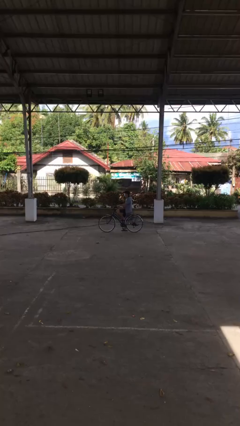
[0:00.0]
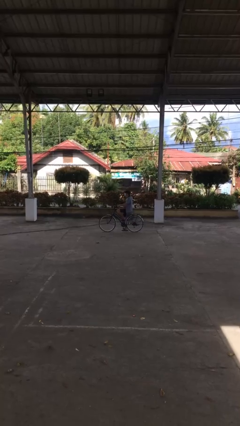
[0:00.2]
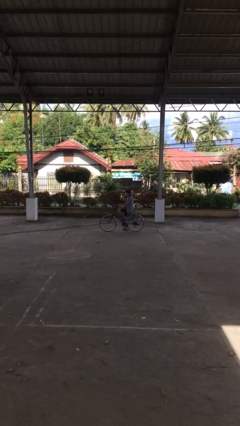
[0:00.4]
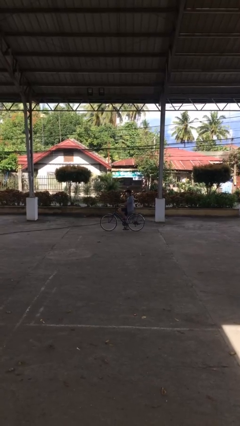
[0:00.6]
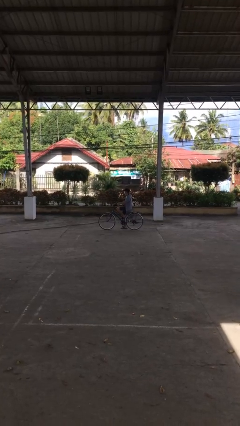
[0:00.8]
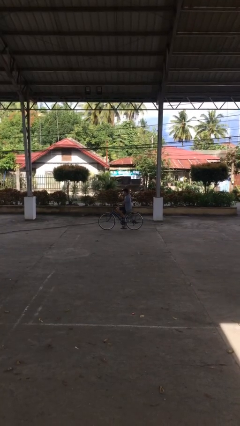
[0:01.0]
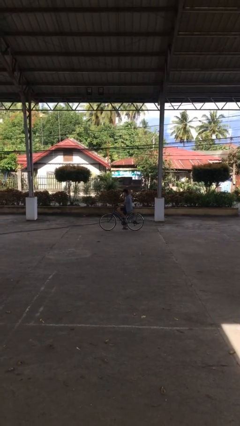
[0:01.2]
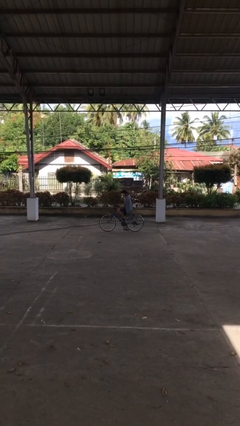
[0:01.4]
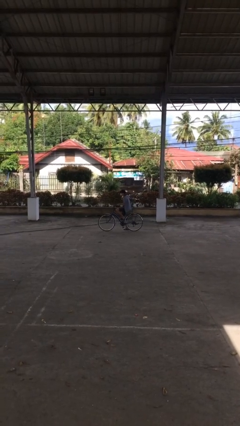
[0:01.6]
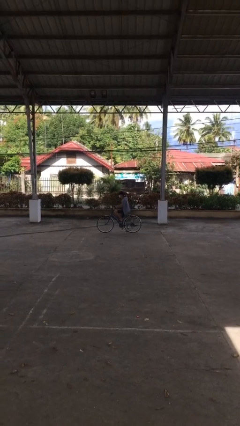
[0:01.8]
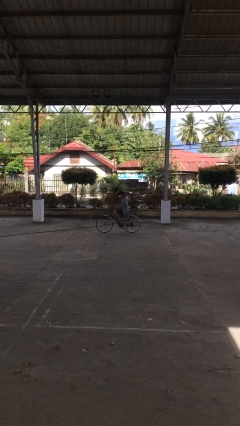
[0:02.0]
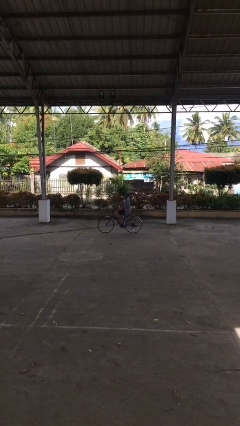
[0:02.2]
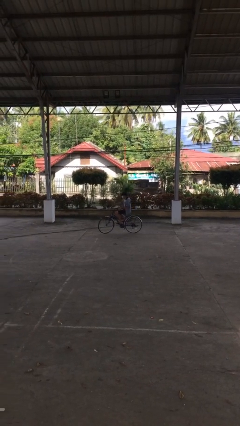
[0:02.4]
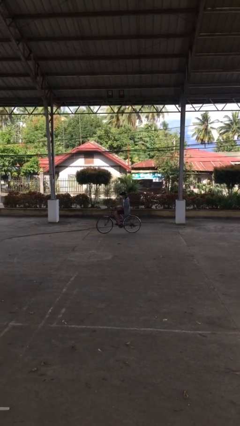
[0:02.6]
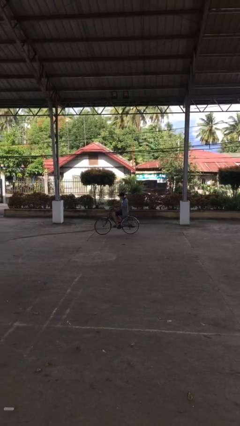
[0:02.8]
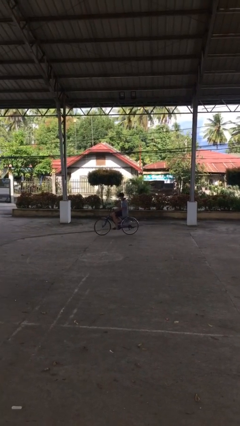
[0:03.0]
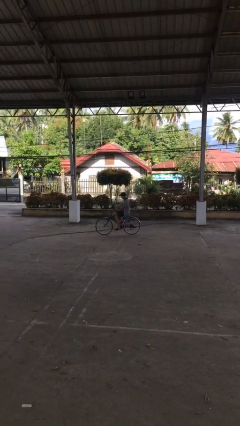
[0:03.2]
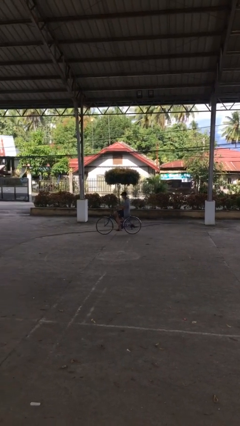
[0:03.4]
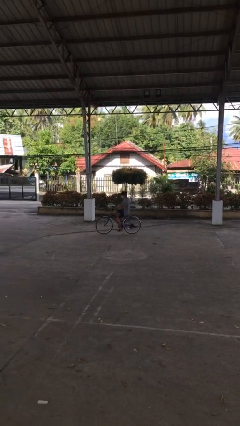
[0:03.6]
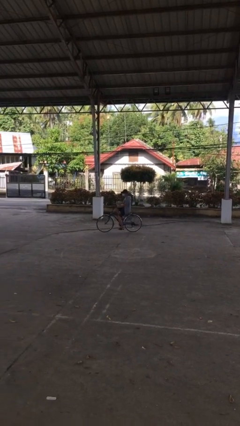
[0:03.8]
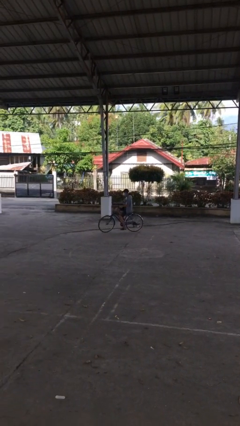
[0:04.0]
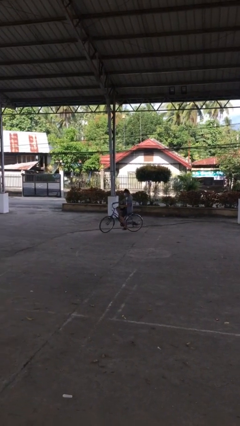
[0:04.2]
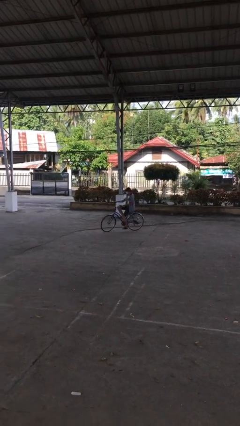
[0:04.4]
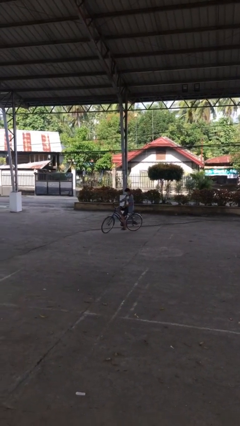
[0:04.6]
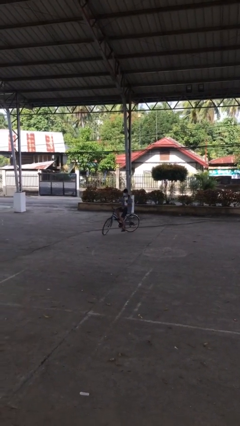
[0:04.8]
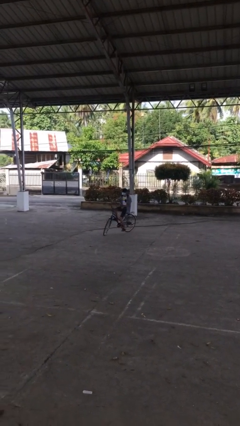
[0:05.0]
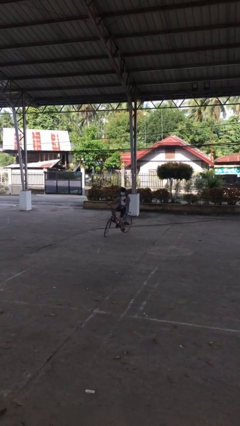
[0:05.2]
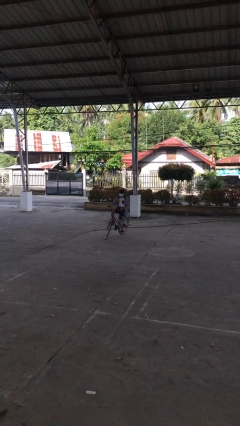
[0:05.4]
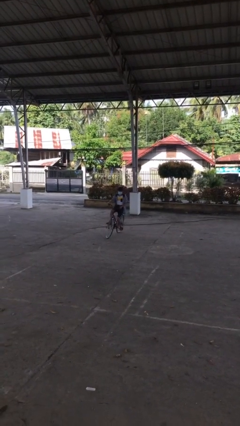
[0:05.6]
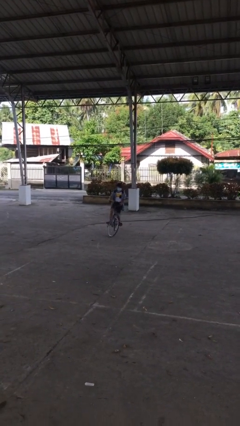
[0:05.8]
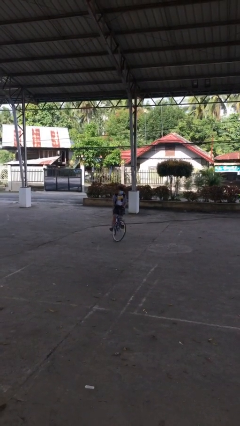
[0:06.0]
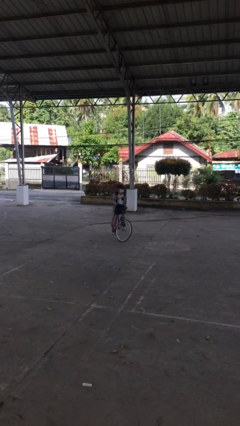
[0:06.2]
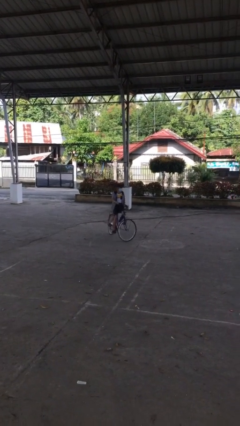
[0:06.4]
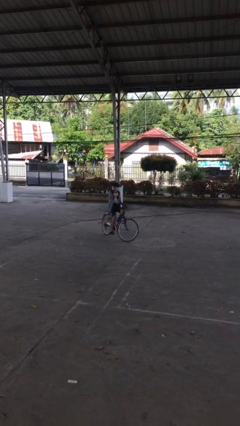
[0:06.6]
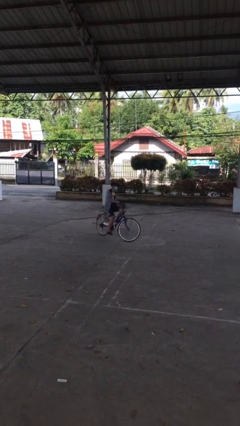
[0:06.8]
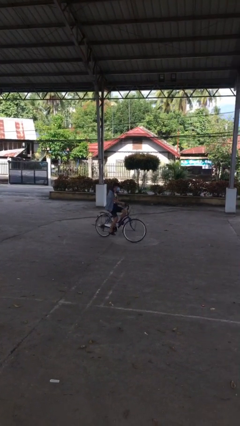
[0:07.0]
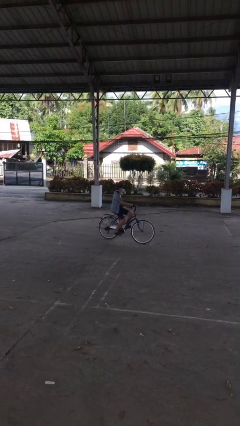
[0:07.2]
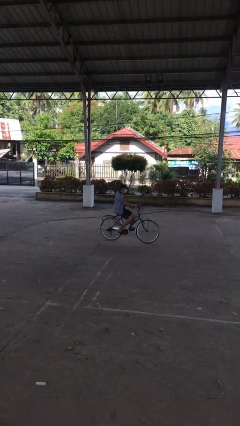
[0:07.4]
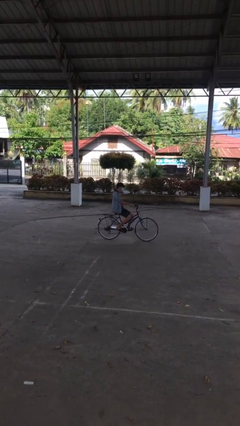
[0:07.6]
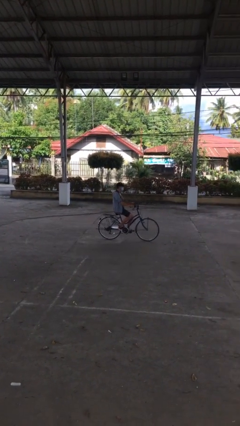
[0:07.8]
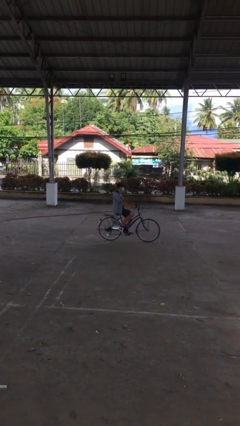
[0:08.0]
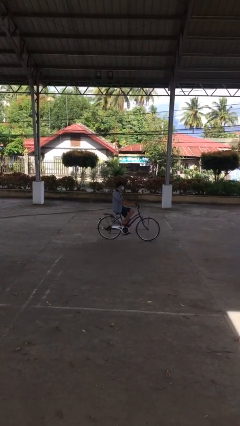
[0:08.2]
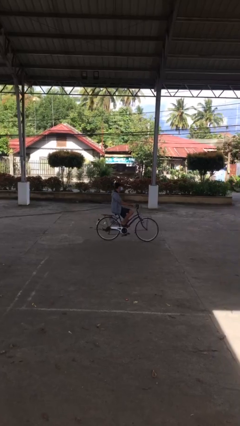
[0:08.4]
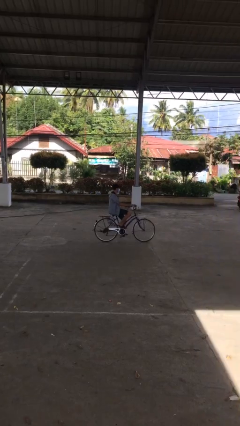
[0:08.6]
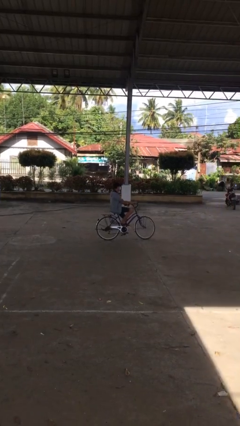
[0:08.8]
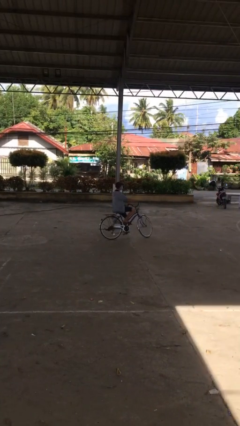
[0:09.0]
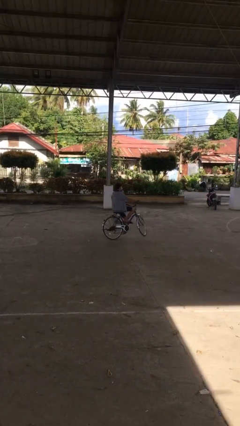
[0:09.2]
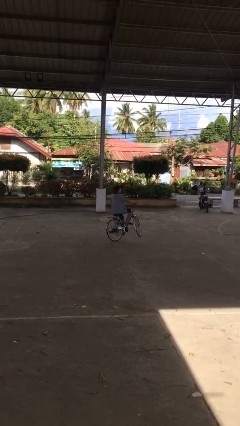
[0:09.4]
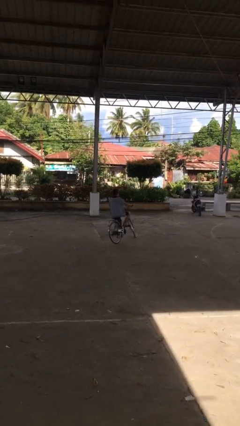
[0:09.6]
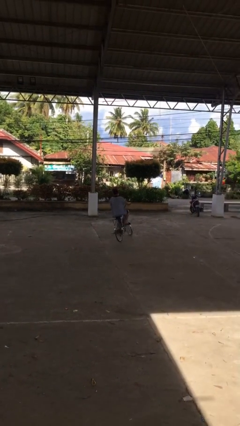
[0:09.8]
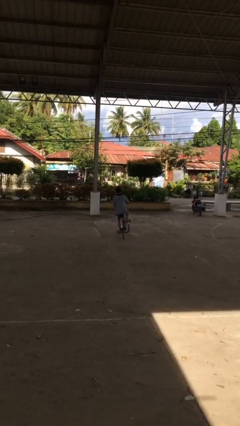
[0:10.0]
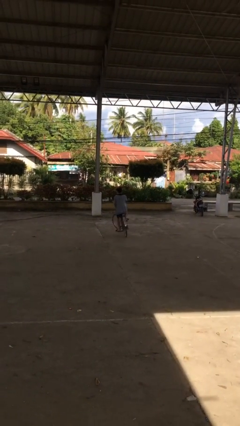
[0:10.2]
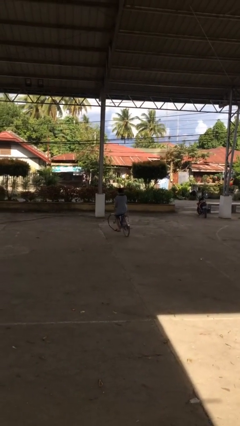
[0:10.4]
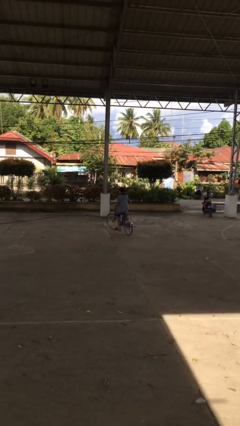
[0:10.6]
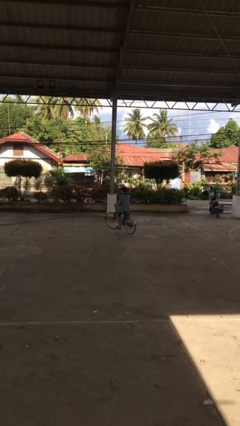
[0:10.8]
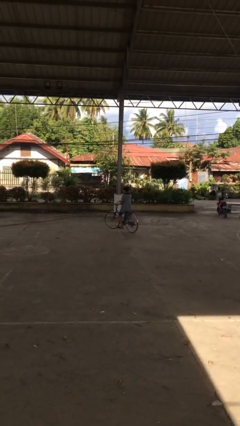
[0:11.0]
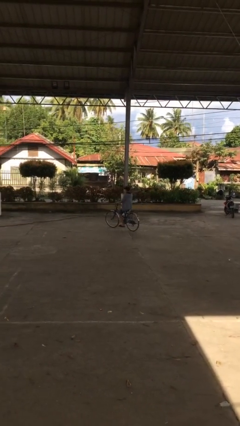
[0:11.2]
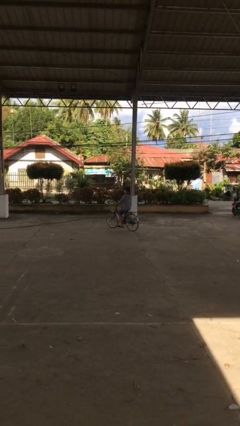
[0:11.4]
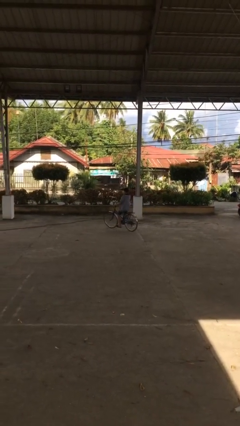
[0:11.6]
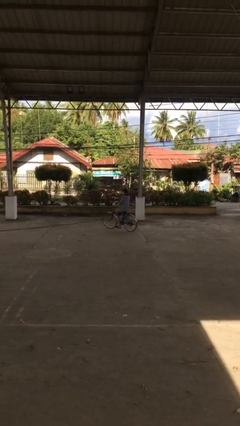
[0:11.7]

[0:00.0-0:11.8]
person rides bicycle

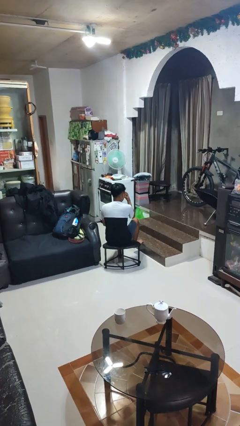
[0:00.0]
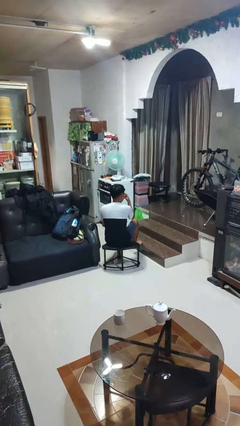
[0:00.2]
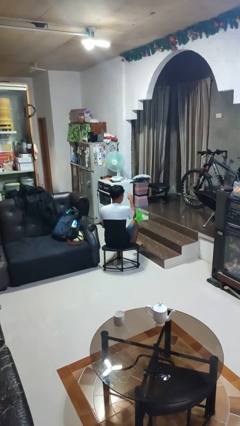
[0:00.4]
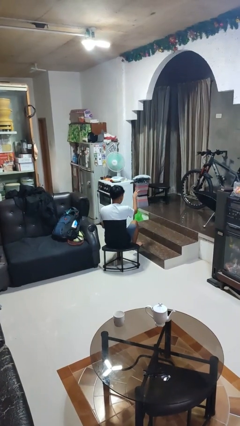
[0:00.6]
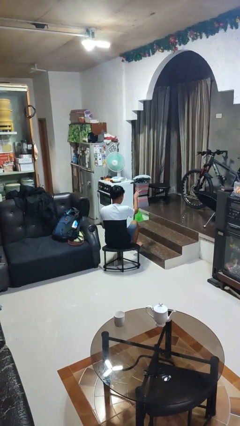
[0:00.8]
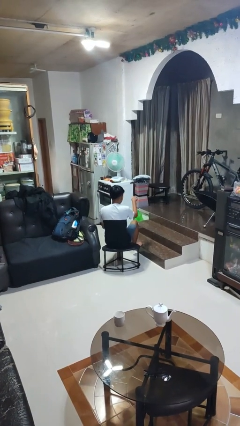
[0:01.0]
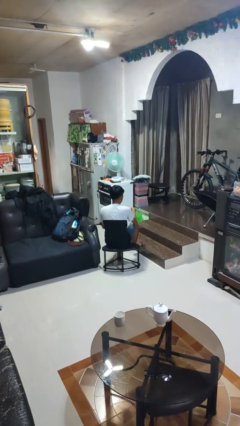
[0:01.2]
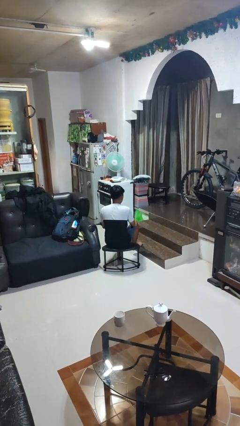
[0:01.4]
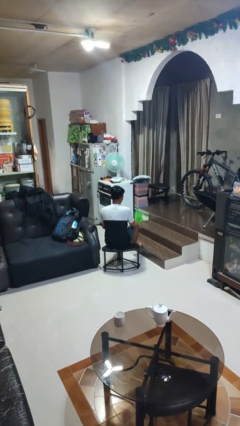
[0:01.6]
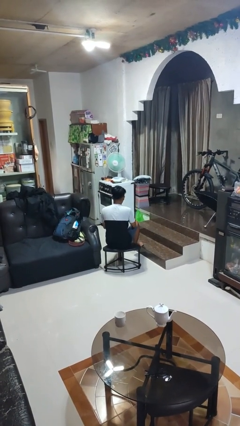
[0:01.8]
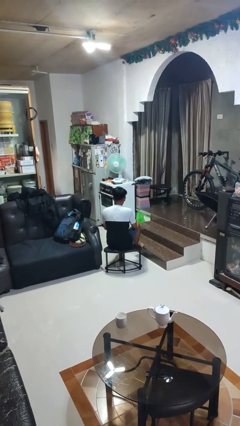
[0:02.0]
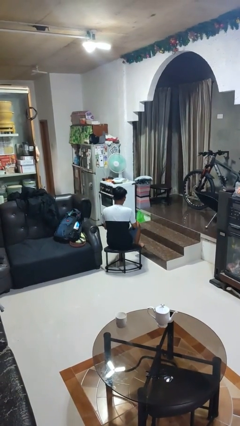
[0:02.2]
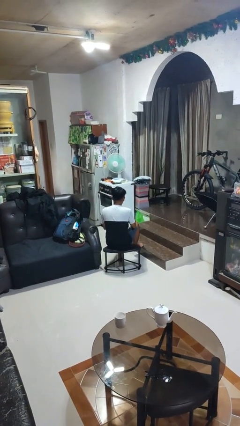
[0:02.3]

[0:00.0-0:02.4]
person gestures watch closely

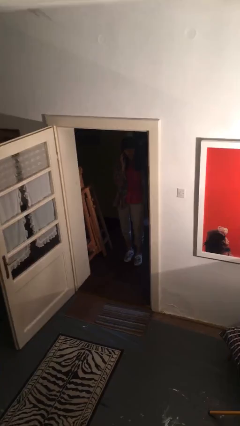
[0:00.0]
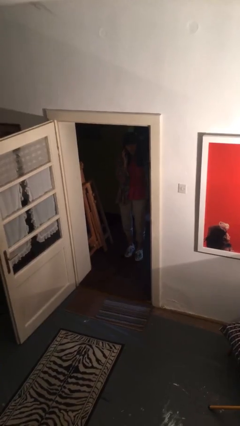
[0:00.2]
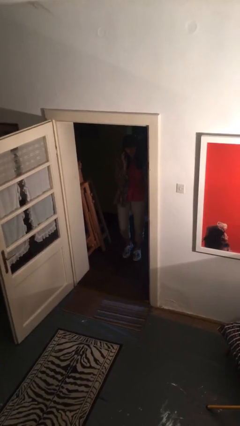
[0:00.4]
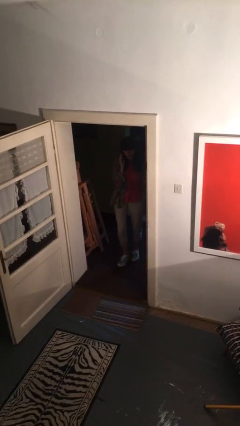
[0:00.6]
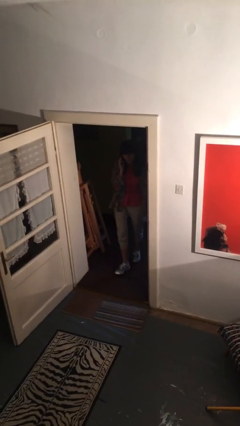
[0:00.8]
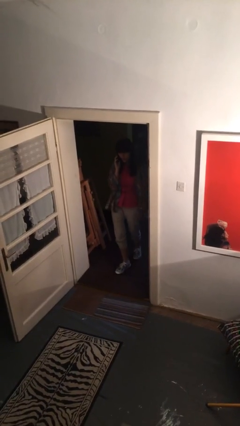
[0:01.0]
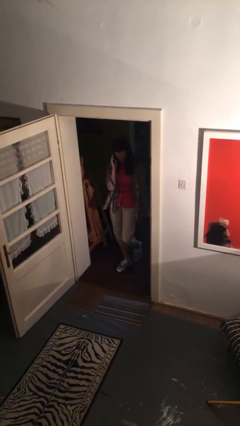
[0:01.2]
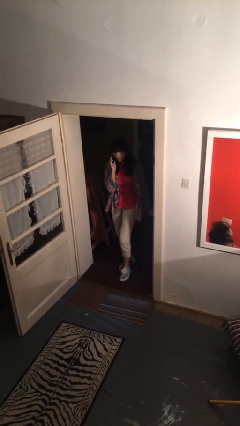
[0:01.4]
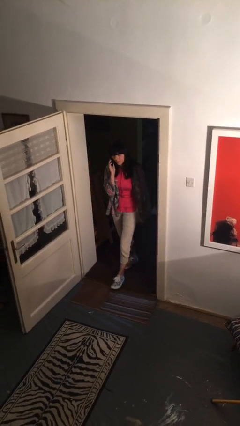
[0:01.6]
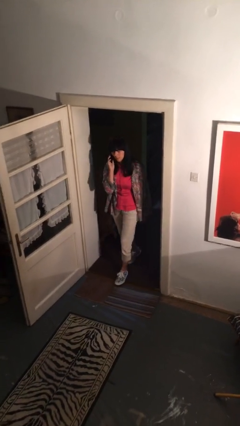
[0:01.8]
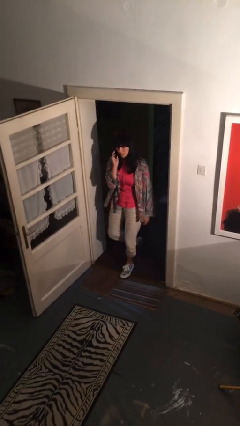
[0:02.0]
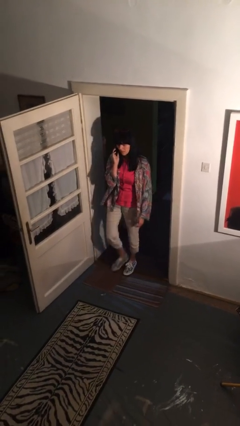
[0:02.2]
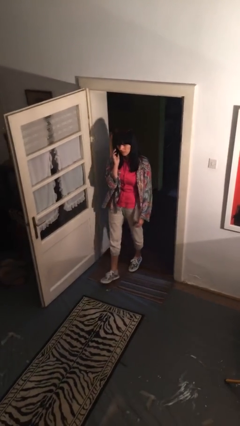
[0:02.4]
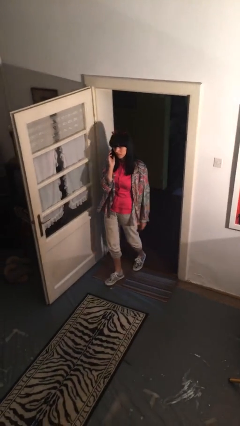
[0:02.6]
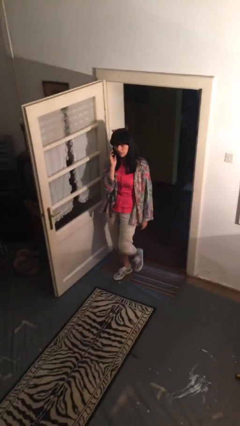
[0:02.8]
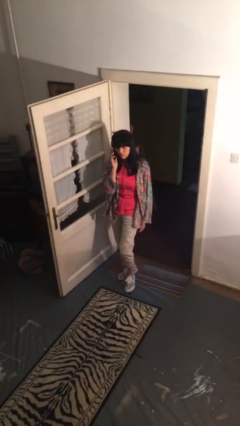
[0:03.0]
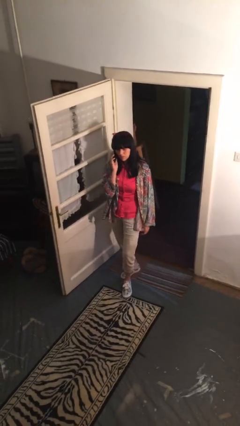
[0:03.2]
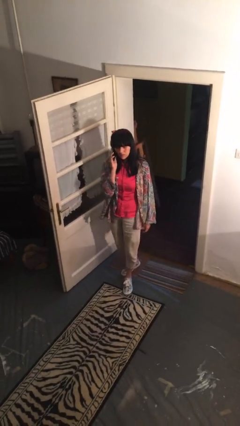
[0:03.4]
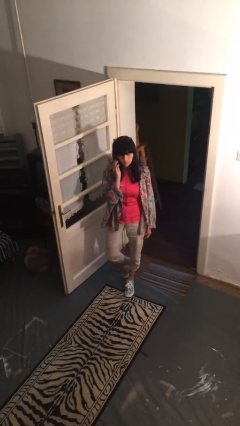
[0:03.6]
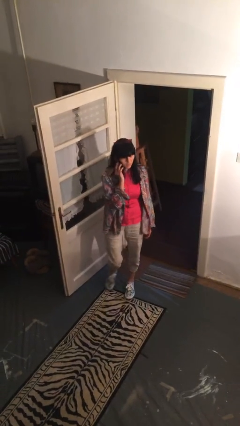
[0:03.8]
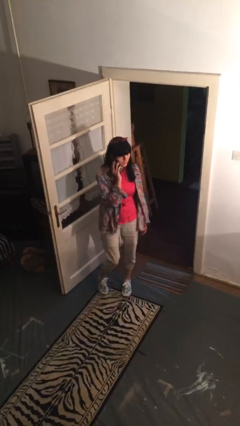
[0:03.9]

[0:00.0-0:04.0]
person enters scene through structure
